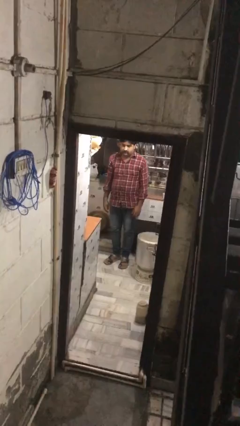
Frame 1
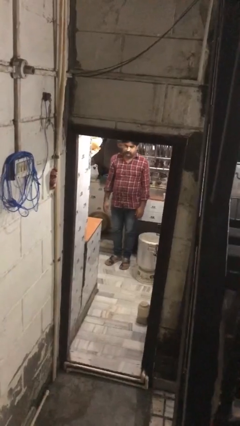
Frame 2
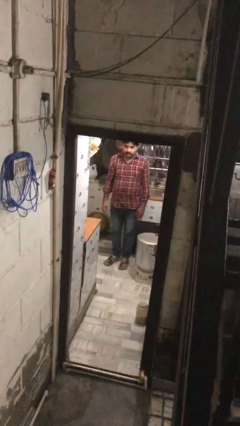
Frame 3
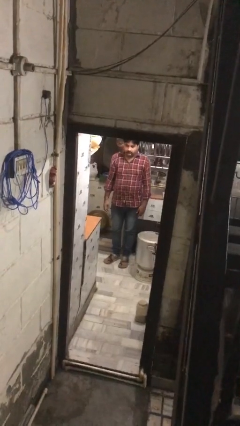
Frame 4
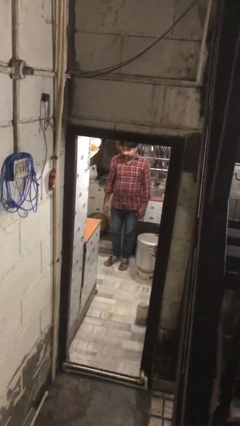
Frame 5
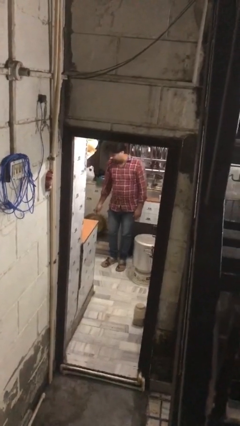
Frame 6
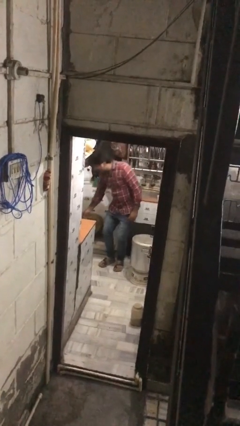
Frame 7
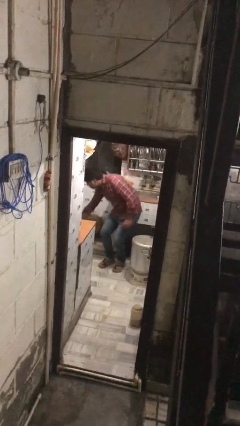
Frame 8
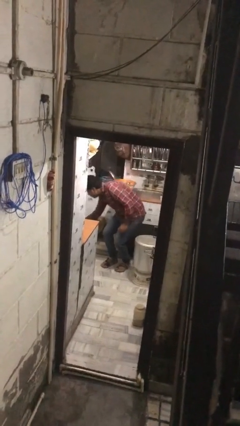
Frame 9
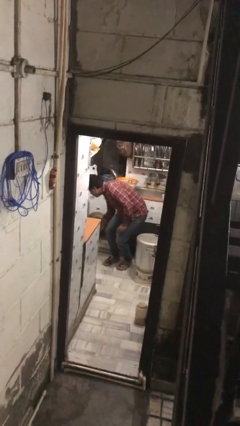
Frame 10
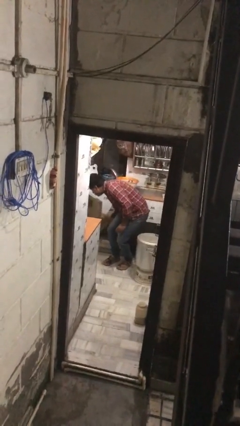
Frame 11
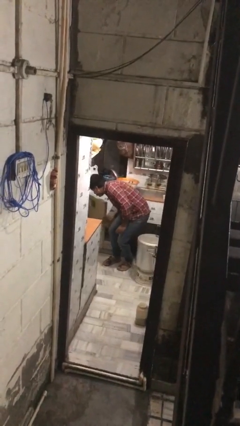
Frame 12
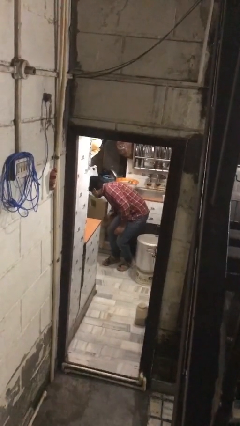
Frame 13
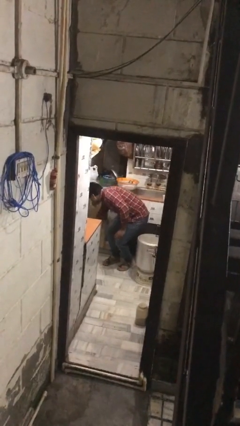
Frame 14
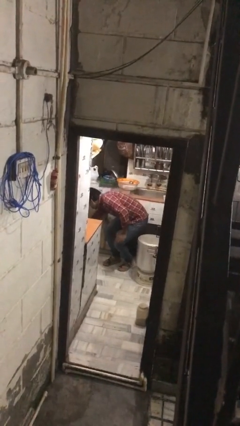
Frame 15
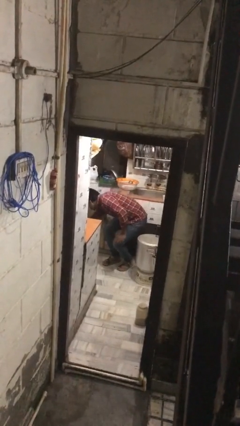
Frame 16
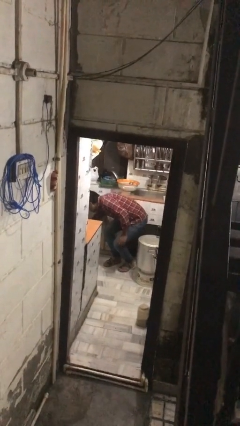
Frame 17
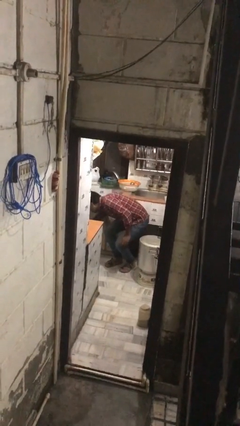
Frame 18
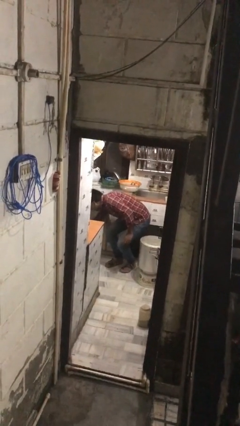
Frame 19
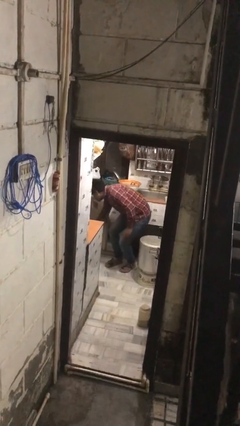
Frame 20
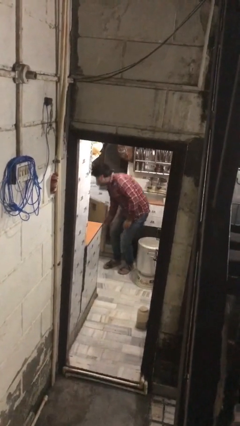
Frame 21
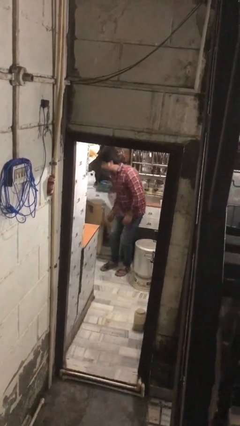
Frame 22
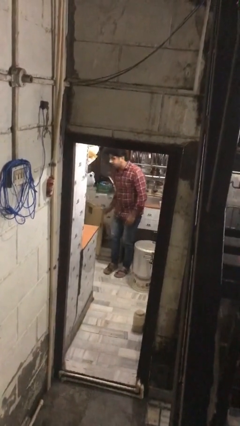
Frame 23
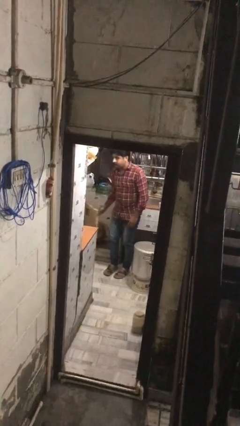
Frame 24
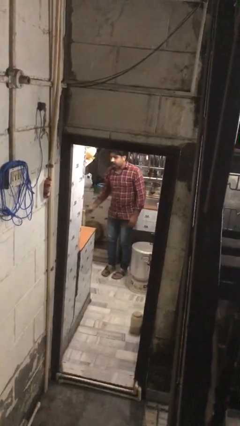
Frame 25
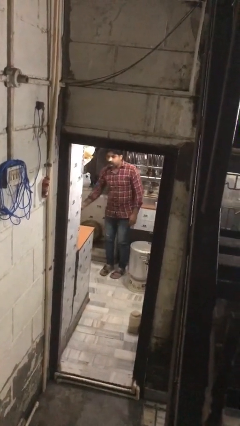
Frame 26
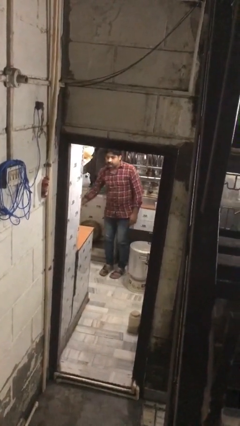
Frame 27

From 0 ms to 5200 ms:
person searches in kitchen drawer

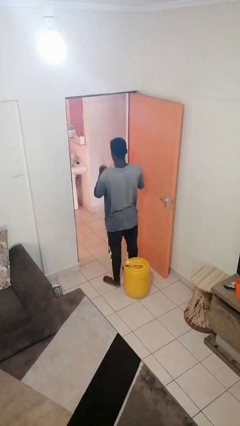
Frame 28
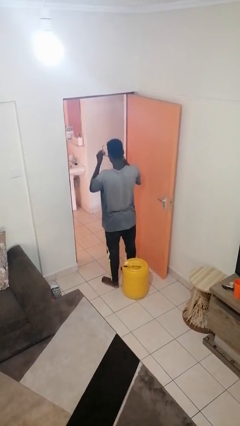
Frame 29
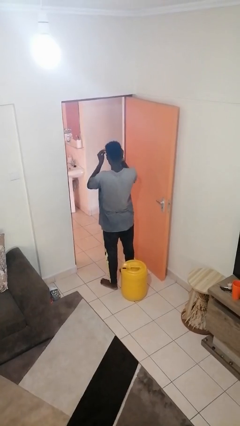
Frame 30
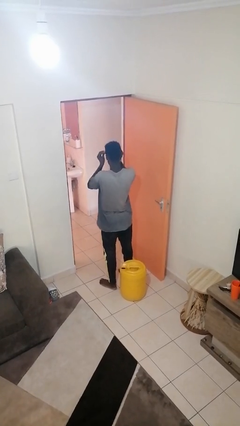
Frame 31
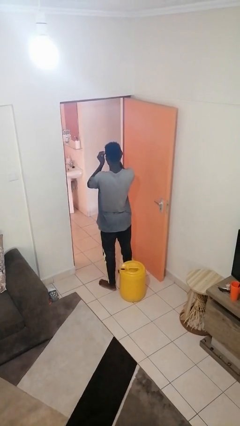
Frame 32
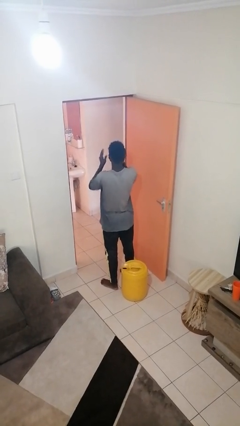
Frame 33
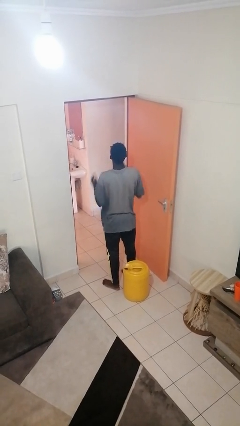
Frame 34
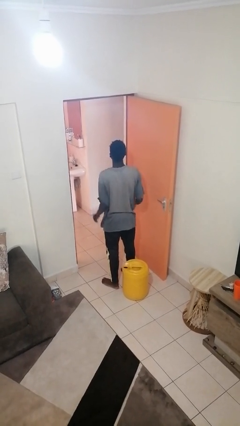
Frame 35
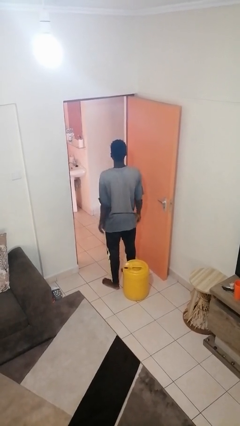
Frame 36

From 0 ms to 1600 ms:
person puts on glasses

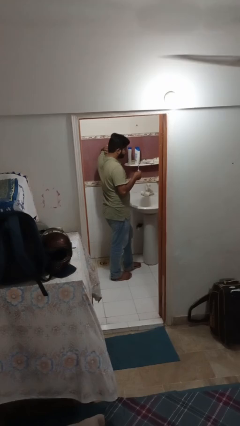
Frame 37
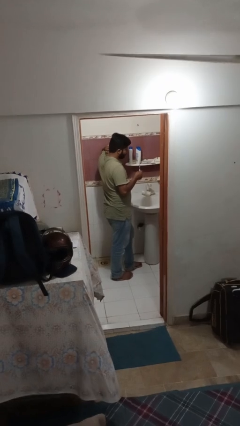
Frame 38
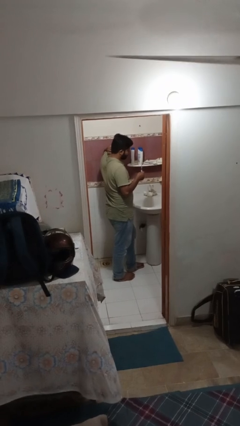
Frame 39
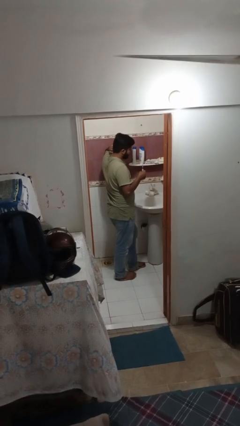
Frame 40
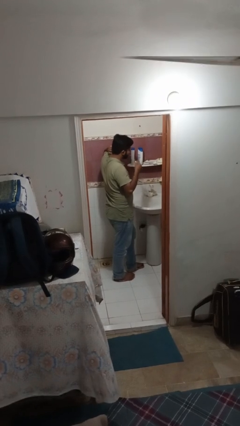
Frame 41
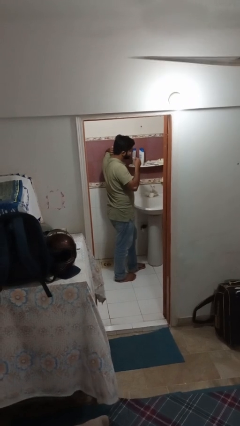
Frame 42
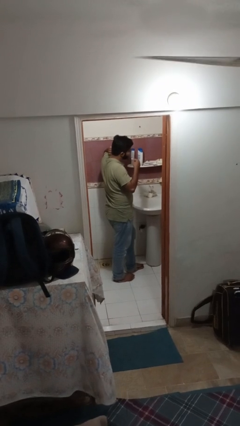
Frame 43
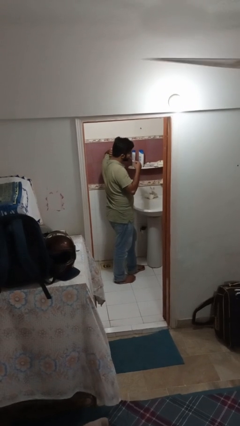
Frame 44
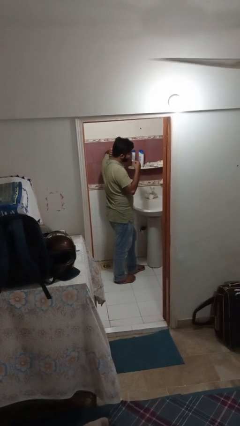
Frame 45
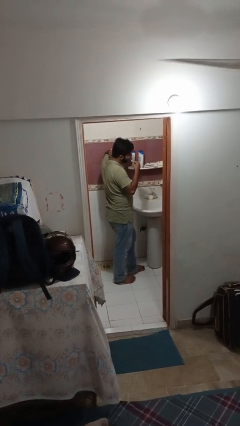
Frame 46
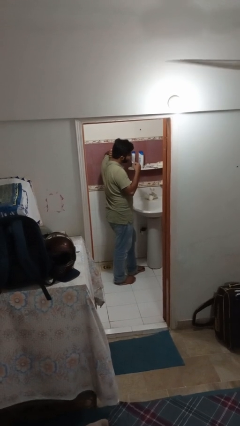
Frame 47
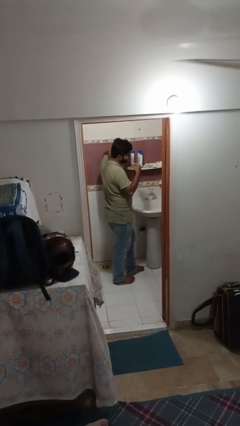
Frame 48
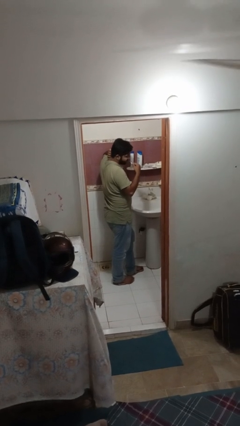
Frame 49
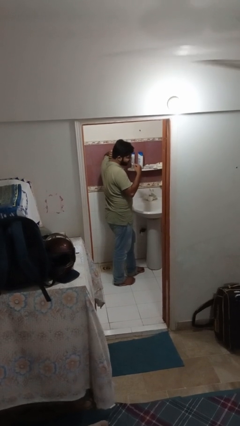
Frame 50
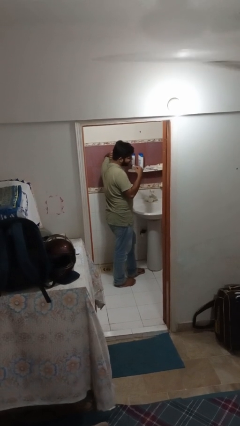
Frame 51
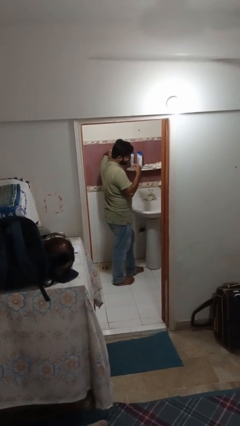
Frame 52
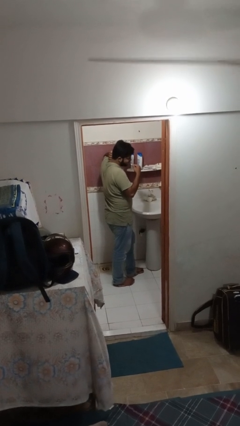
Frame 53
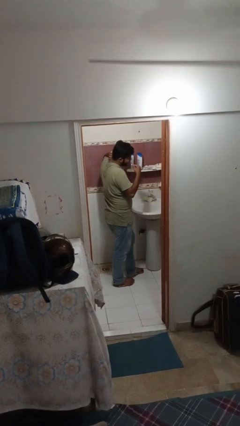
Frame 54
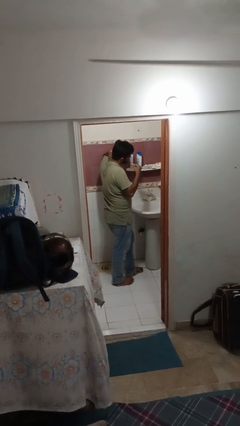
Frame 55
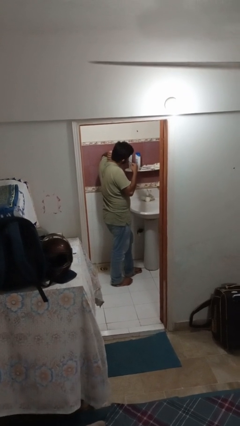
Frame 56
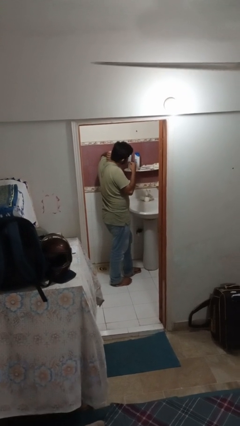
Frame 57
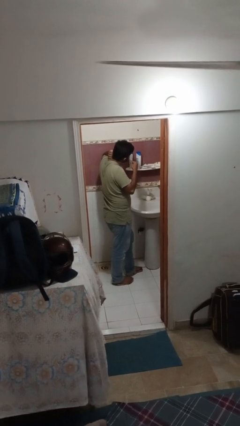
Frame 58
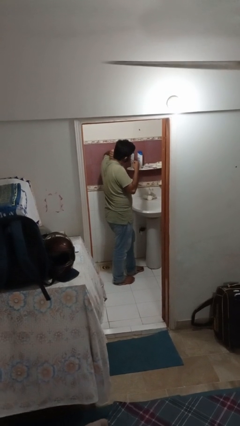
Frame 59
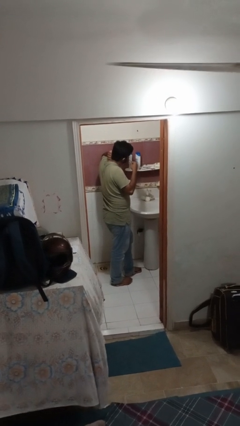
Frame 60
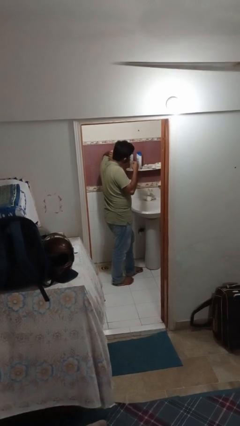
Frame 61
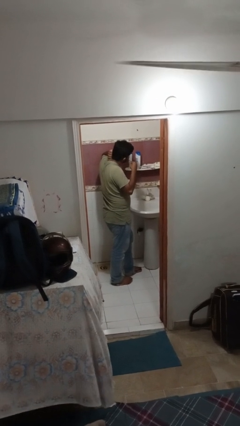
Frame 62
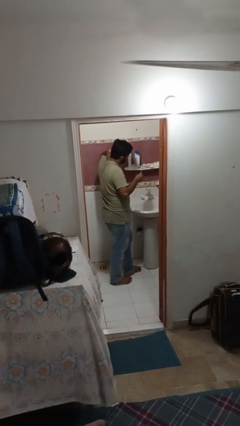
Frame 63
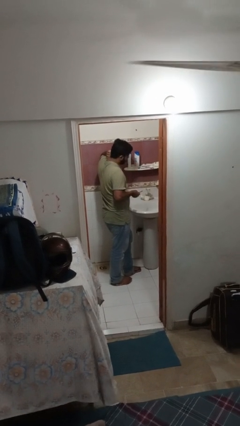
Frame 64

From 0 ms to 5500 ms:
person brushes teeth

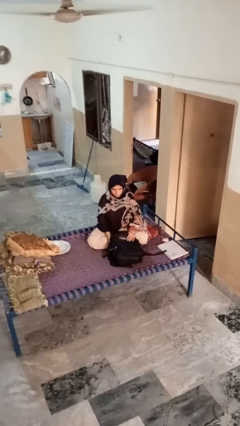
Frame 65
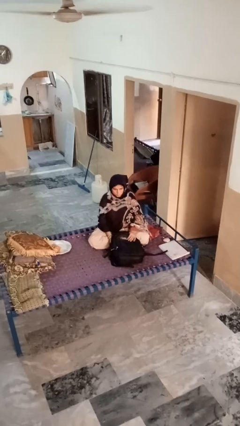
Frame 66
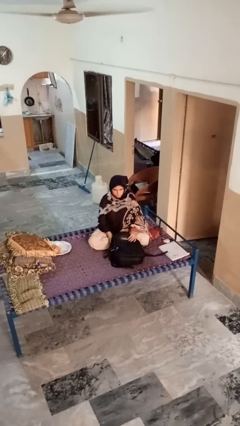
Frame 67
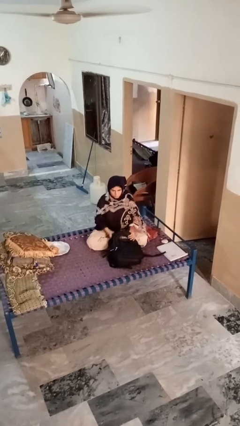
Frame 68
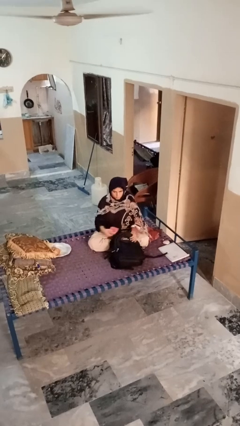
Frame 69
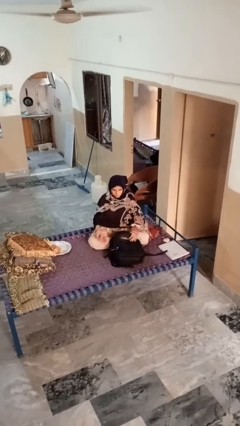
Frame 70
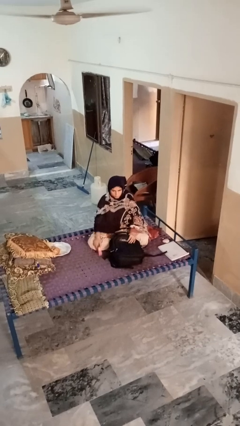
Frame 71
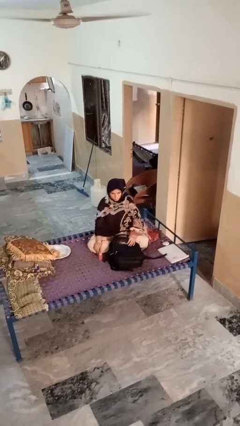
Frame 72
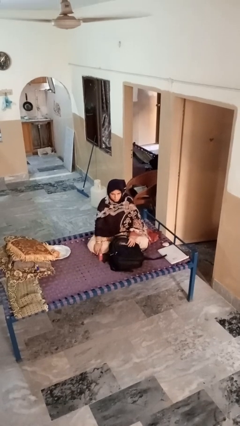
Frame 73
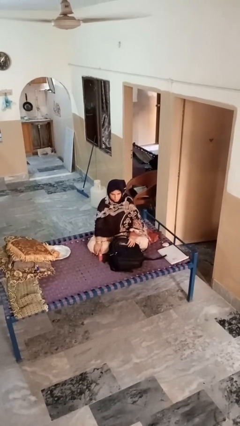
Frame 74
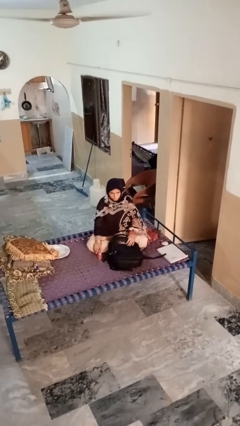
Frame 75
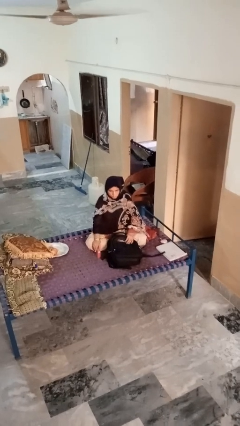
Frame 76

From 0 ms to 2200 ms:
person takes object from bag

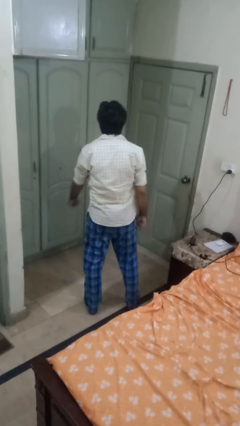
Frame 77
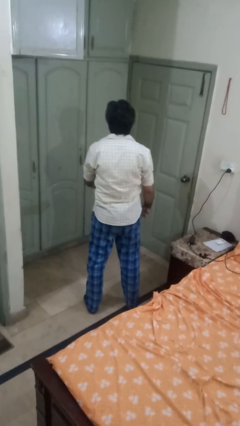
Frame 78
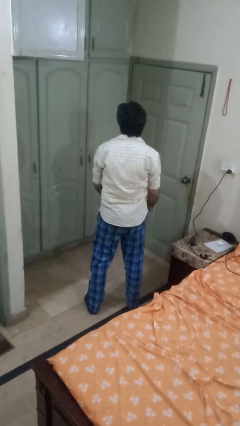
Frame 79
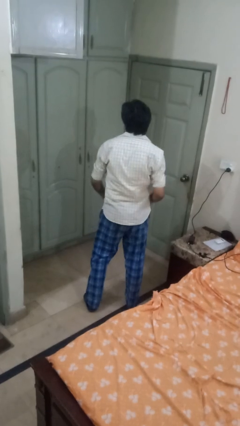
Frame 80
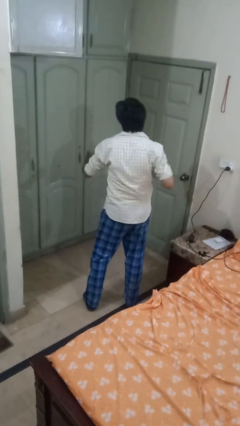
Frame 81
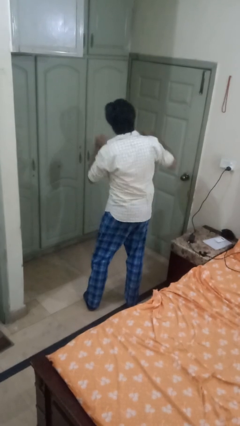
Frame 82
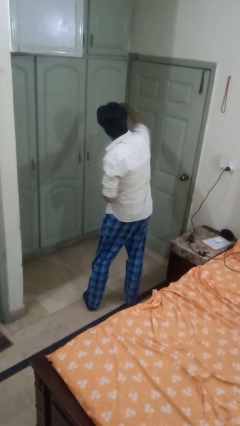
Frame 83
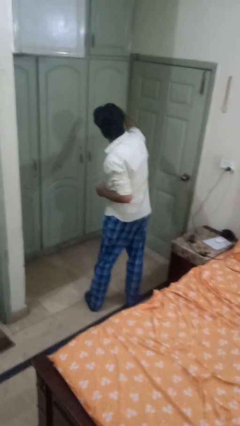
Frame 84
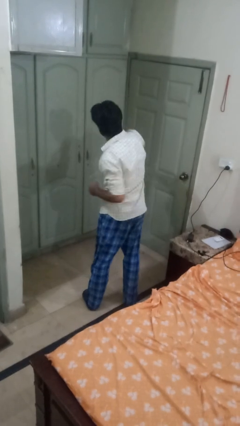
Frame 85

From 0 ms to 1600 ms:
person punches

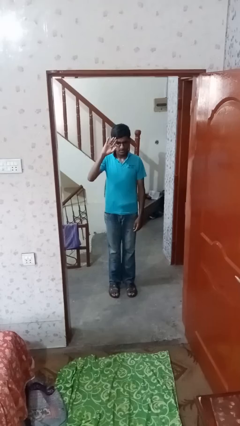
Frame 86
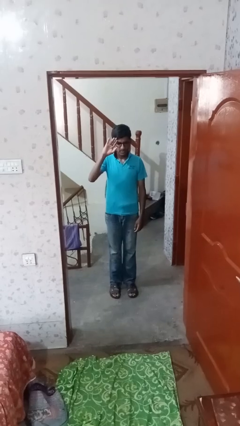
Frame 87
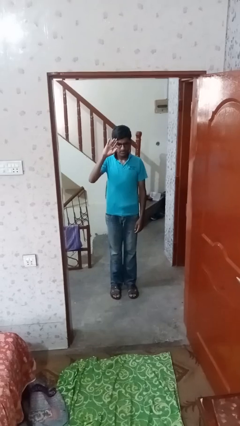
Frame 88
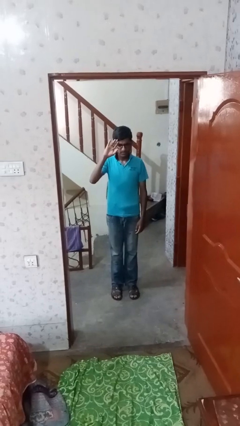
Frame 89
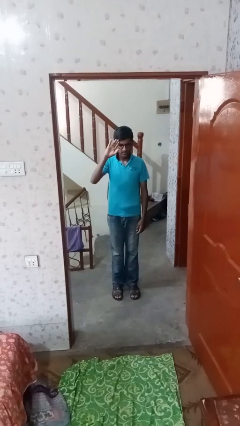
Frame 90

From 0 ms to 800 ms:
person salutes

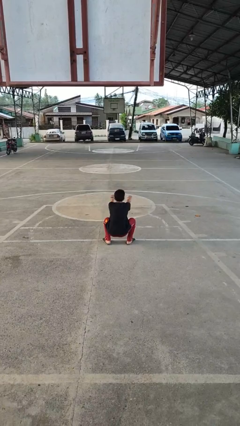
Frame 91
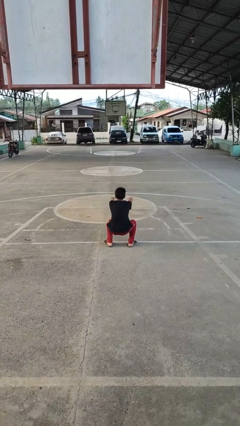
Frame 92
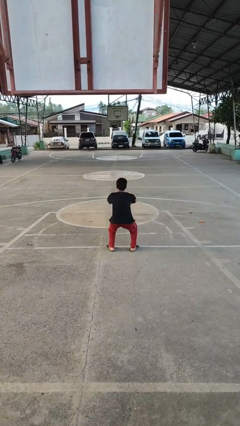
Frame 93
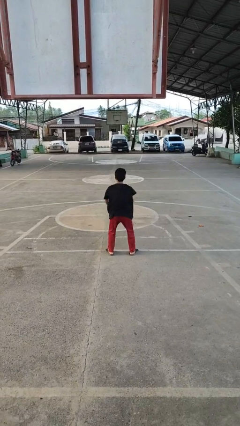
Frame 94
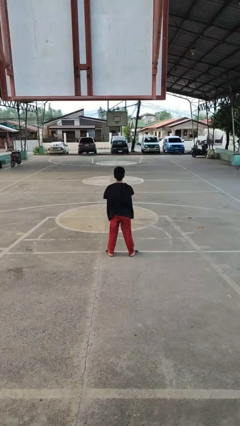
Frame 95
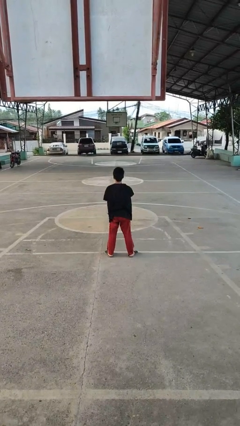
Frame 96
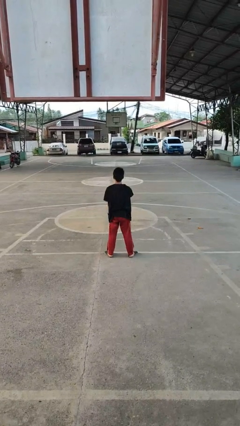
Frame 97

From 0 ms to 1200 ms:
person stands up
